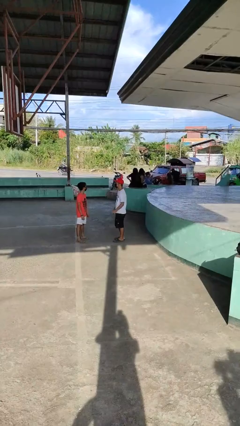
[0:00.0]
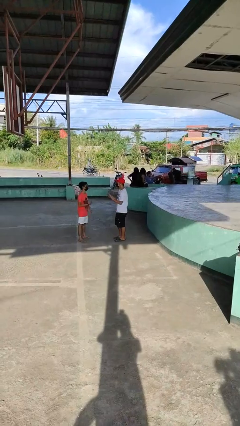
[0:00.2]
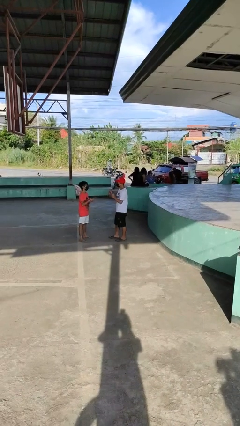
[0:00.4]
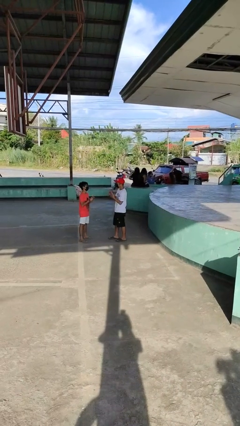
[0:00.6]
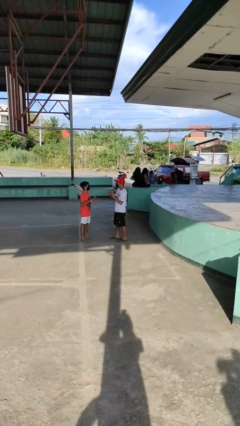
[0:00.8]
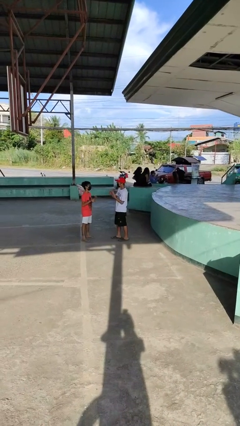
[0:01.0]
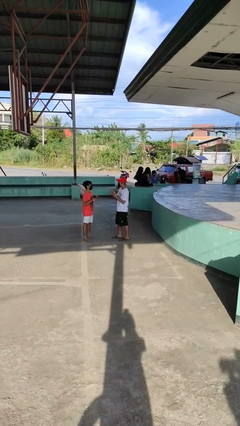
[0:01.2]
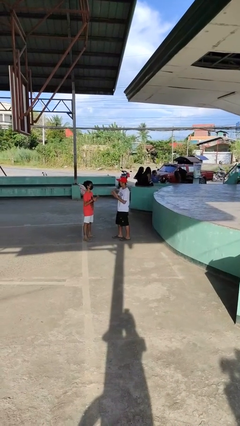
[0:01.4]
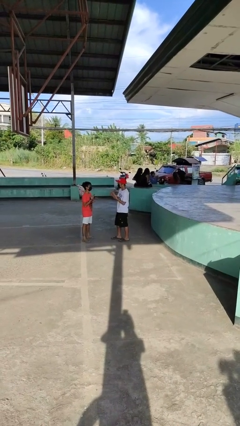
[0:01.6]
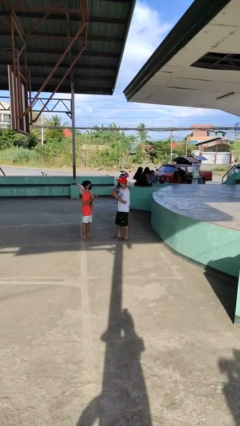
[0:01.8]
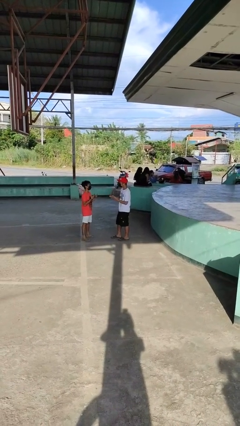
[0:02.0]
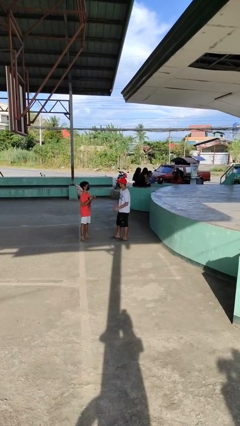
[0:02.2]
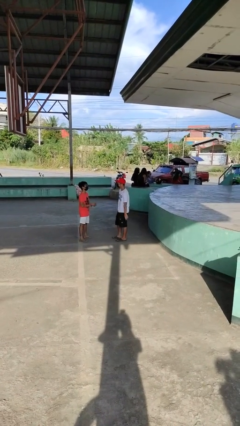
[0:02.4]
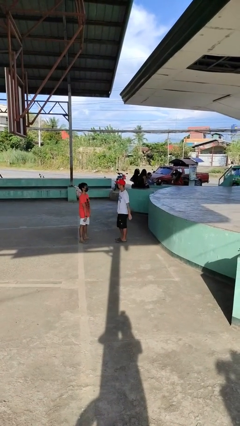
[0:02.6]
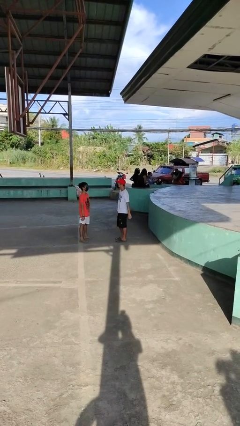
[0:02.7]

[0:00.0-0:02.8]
person talks to person

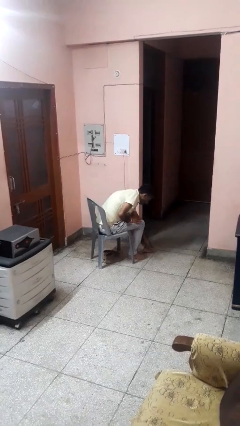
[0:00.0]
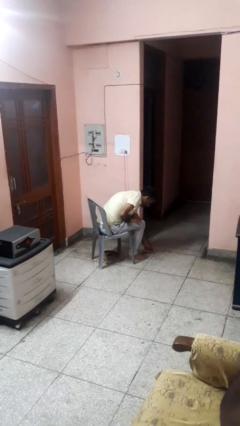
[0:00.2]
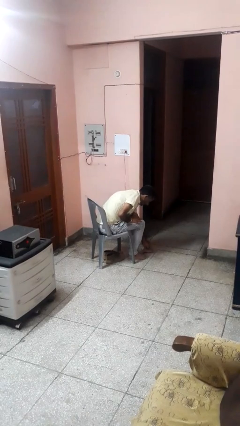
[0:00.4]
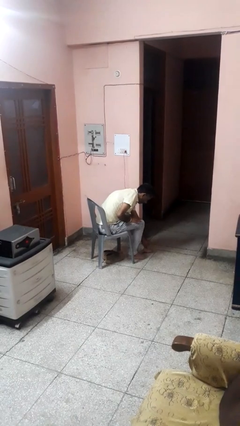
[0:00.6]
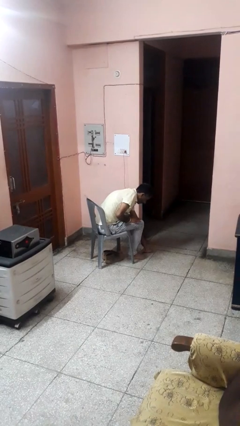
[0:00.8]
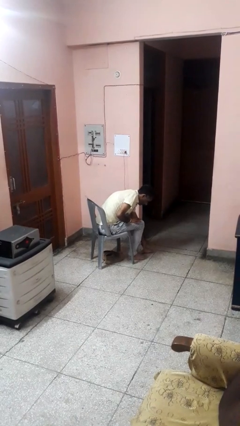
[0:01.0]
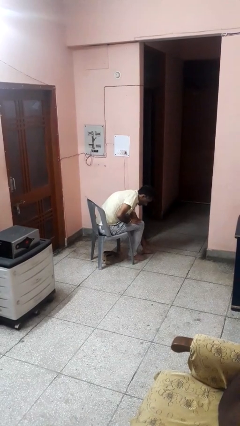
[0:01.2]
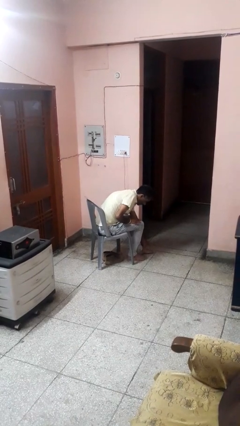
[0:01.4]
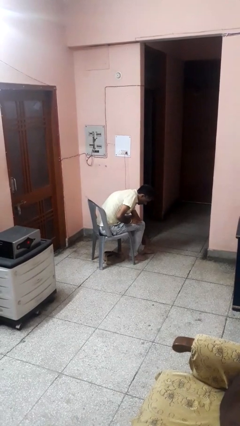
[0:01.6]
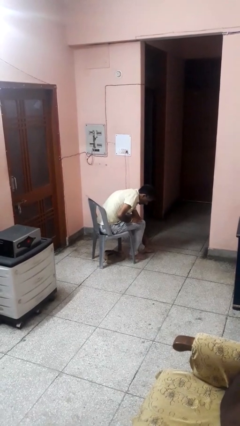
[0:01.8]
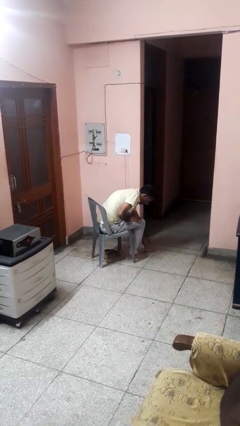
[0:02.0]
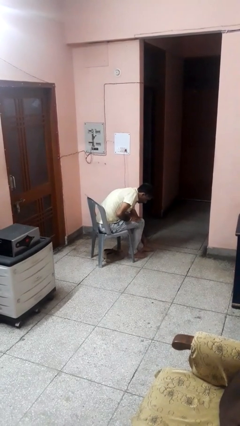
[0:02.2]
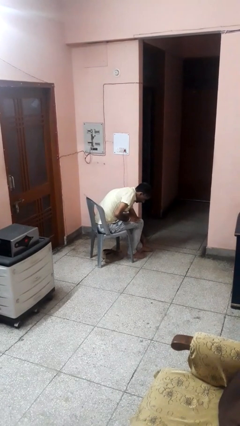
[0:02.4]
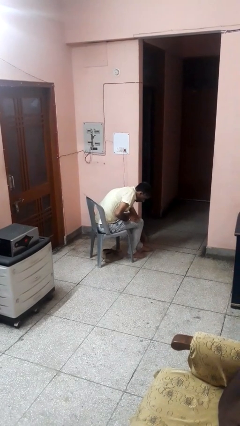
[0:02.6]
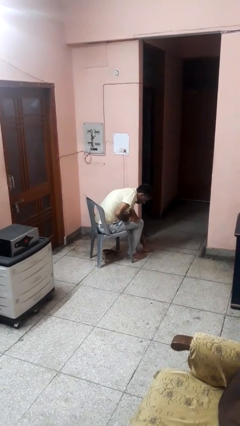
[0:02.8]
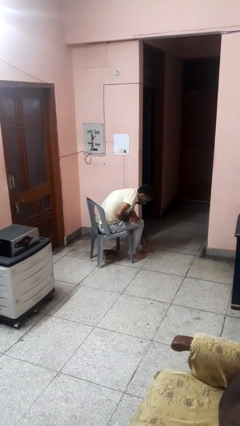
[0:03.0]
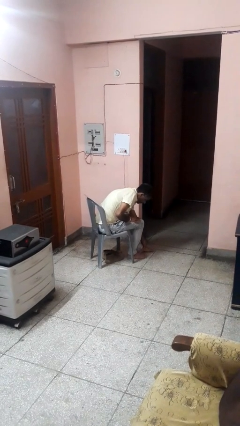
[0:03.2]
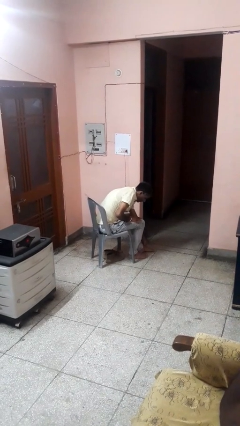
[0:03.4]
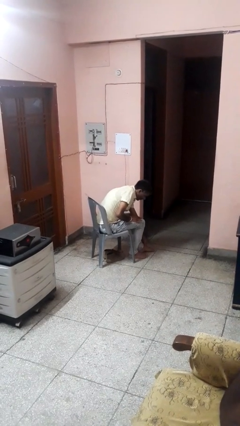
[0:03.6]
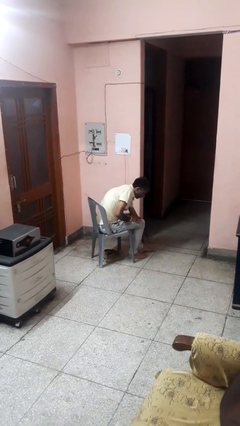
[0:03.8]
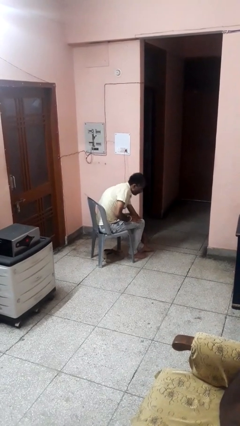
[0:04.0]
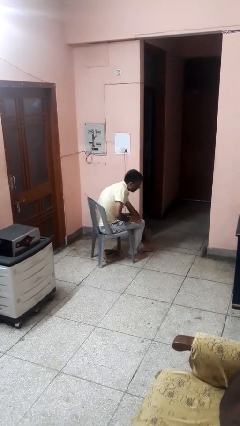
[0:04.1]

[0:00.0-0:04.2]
person rubs foot

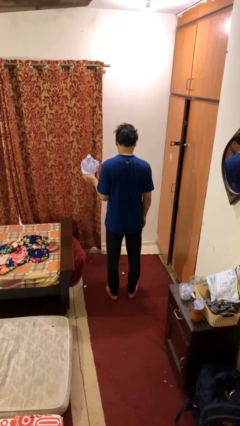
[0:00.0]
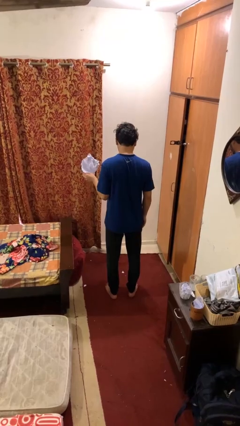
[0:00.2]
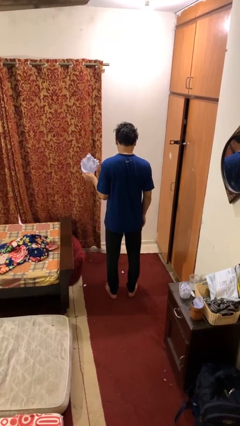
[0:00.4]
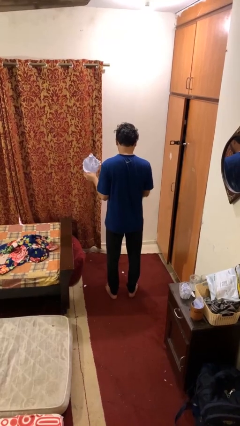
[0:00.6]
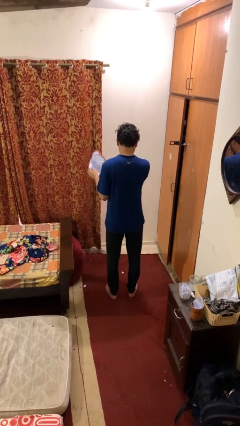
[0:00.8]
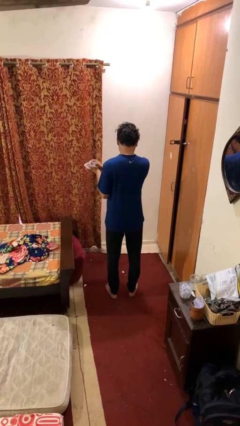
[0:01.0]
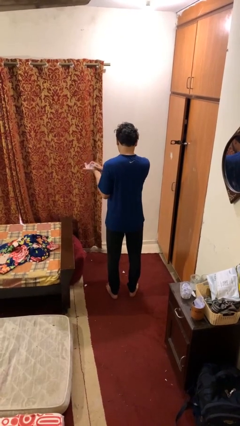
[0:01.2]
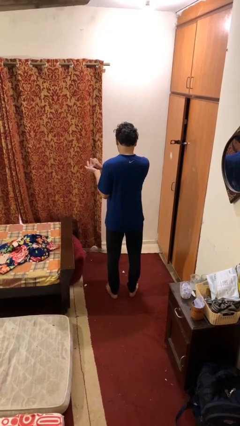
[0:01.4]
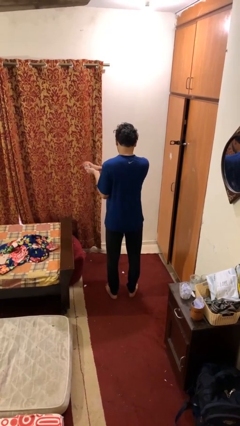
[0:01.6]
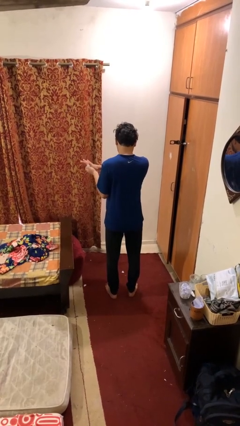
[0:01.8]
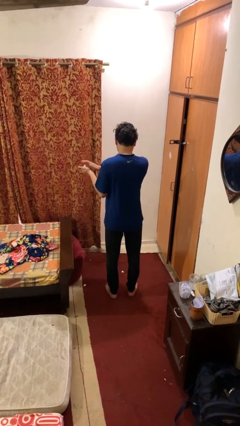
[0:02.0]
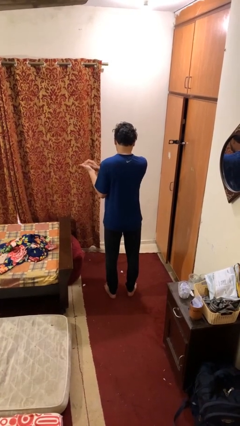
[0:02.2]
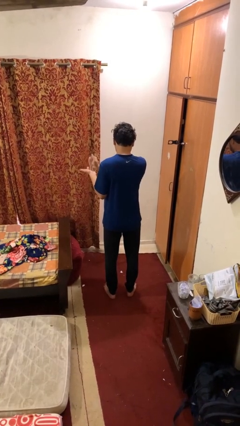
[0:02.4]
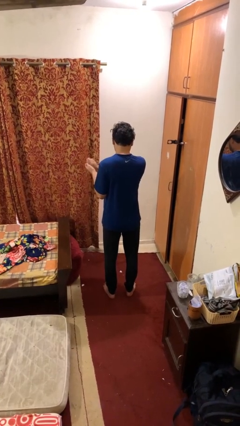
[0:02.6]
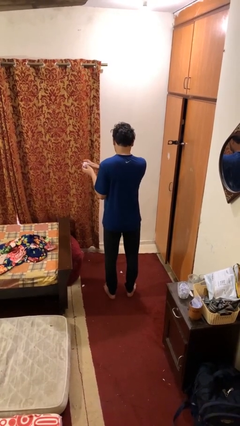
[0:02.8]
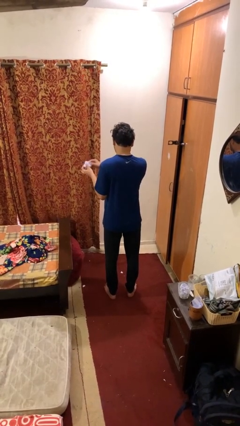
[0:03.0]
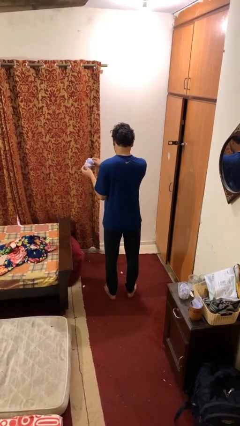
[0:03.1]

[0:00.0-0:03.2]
person crumples paper

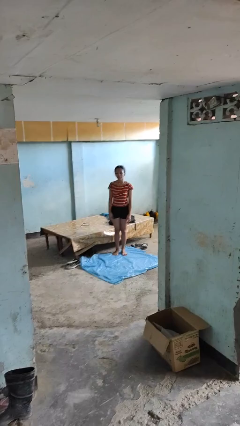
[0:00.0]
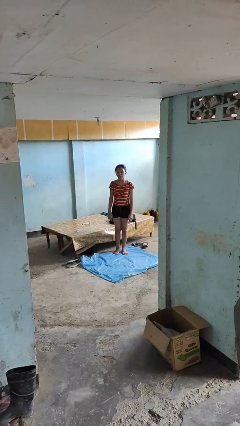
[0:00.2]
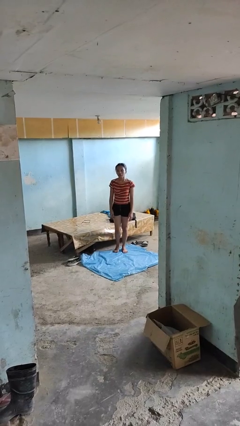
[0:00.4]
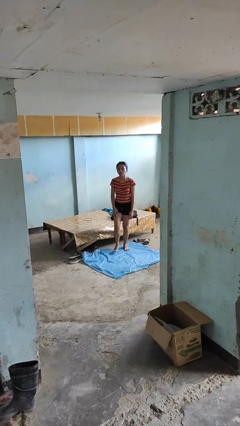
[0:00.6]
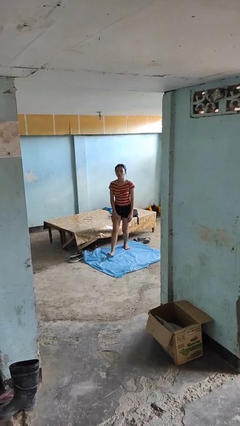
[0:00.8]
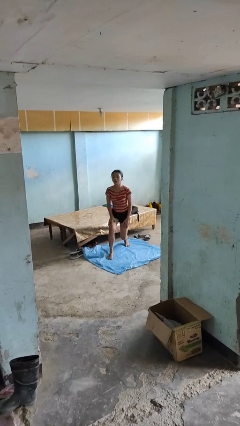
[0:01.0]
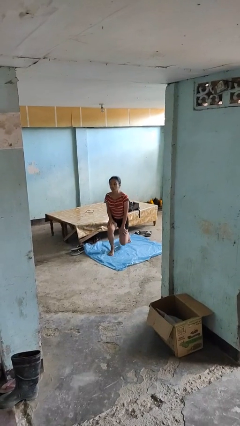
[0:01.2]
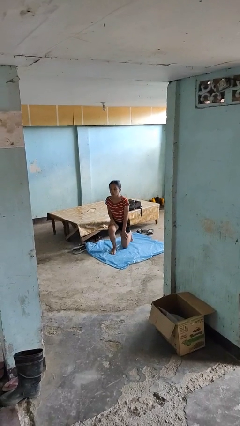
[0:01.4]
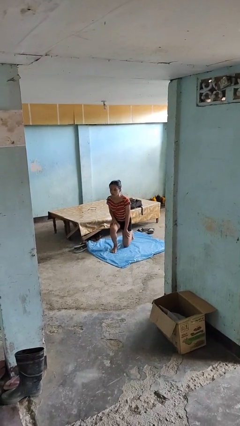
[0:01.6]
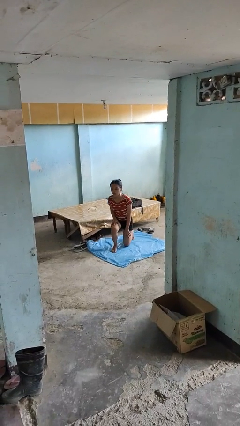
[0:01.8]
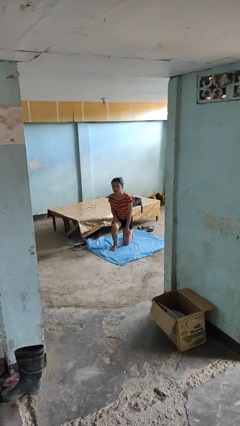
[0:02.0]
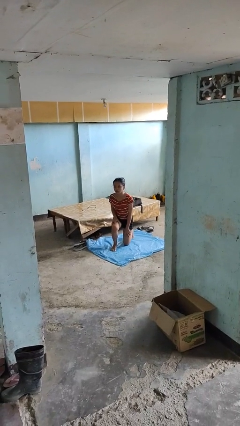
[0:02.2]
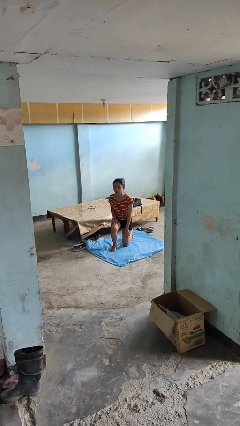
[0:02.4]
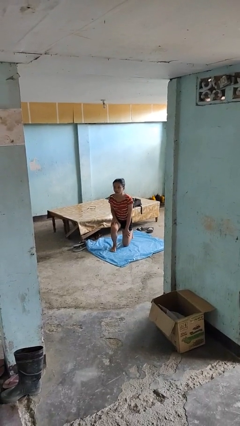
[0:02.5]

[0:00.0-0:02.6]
person kneels

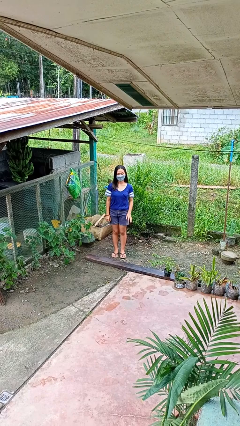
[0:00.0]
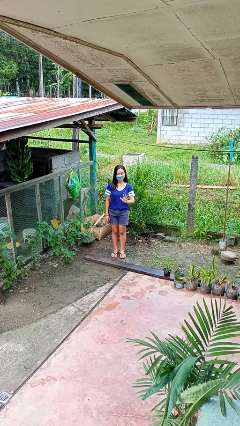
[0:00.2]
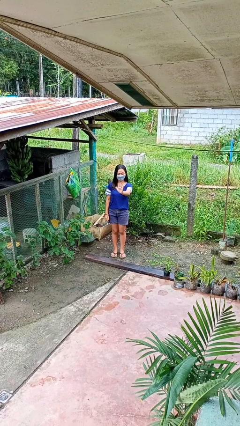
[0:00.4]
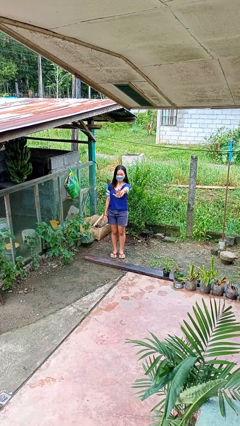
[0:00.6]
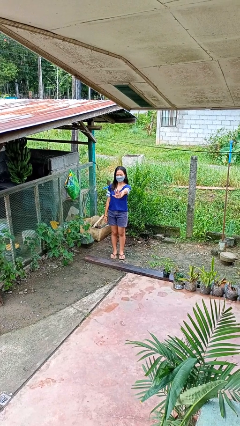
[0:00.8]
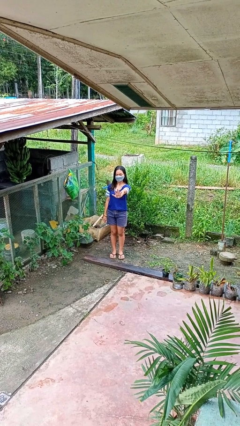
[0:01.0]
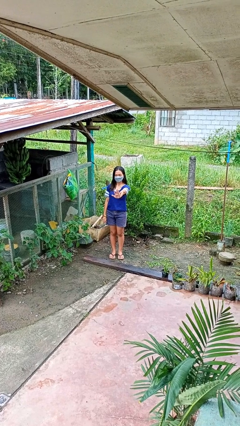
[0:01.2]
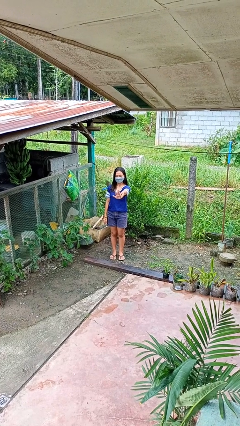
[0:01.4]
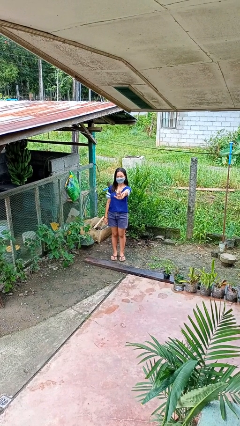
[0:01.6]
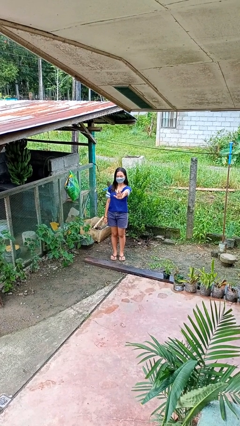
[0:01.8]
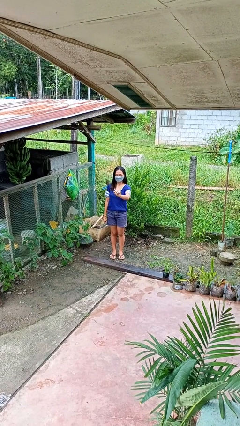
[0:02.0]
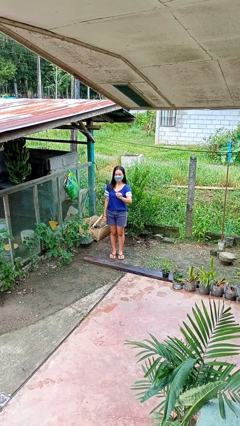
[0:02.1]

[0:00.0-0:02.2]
person gestures stop

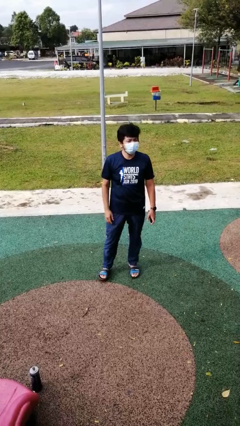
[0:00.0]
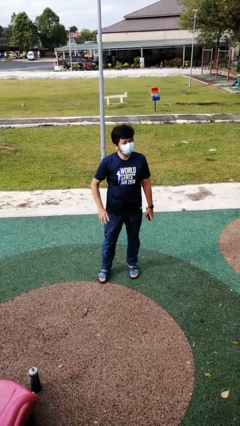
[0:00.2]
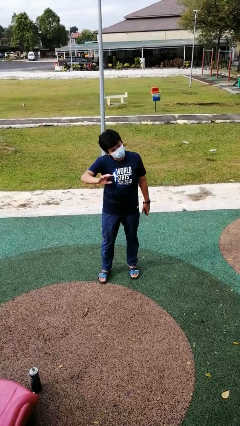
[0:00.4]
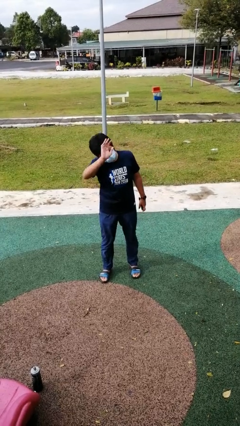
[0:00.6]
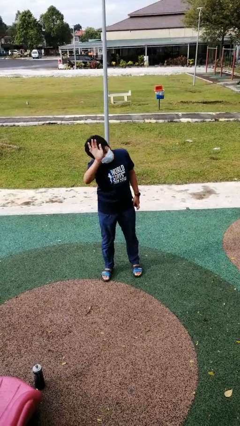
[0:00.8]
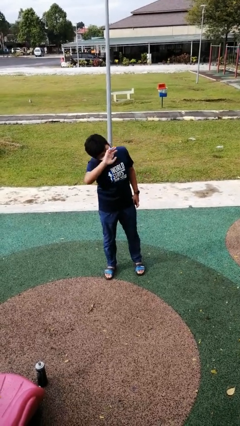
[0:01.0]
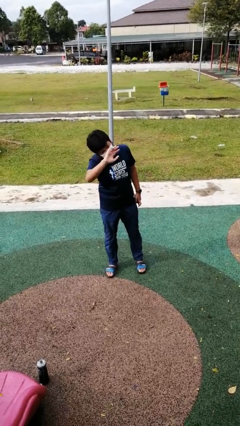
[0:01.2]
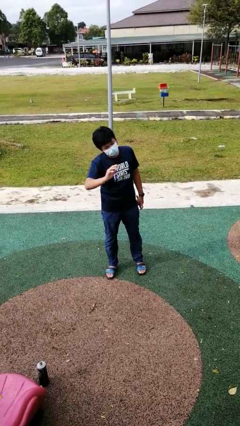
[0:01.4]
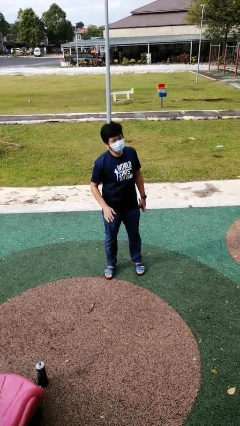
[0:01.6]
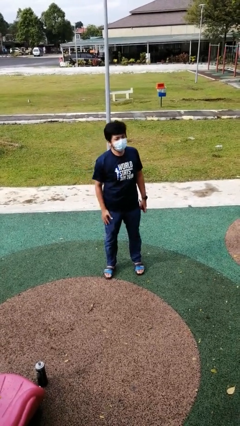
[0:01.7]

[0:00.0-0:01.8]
person waves at person

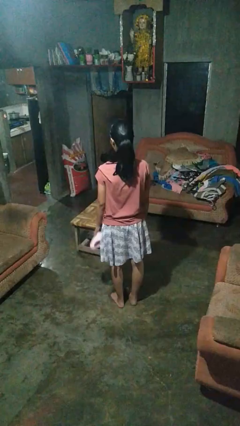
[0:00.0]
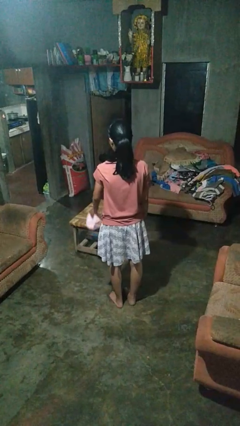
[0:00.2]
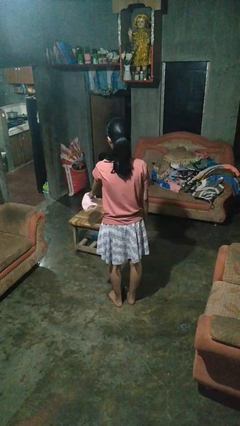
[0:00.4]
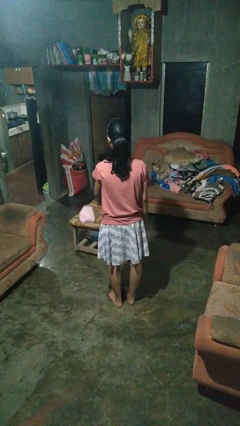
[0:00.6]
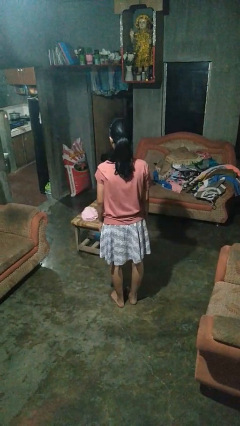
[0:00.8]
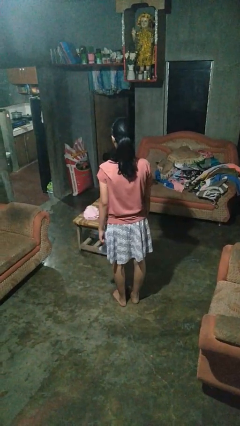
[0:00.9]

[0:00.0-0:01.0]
person throws object on table
